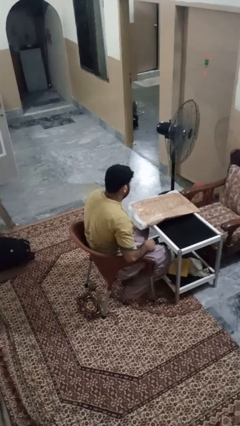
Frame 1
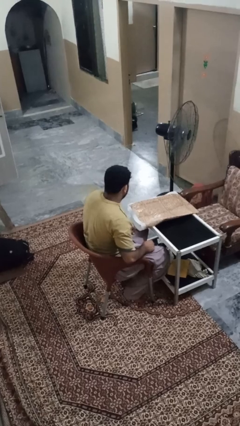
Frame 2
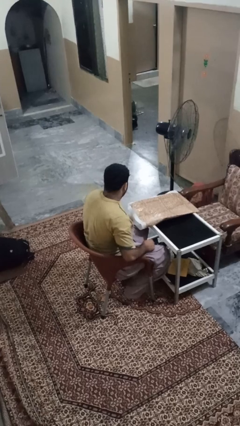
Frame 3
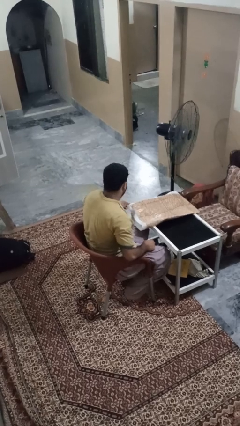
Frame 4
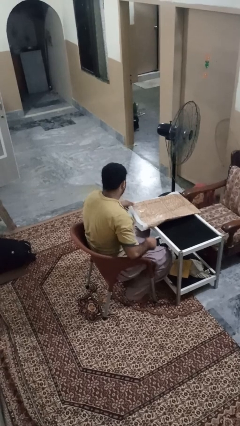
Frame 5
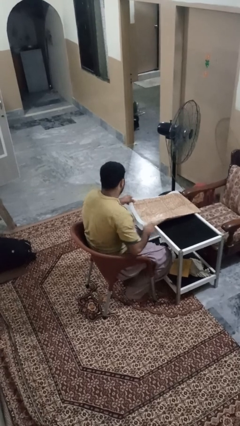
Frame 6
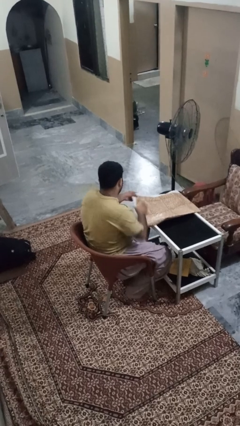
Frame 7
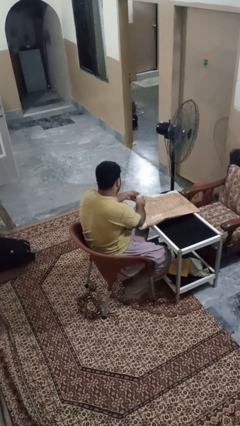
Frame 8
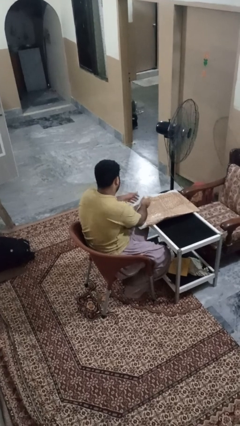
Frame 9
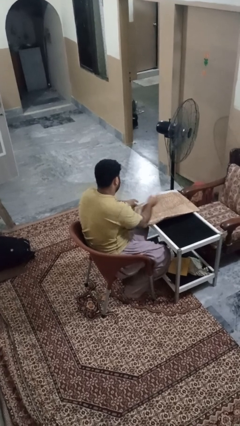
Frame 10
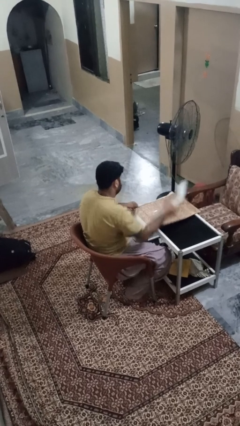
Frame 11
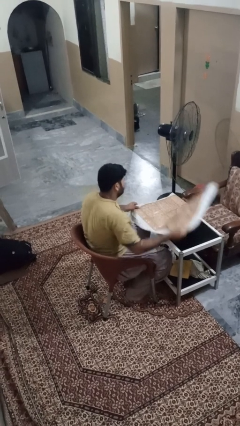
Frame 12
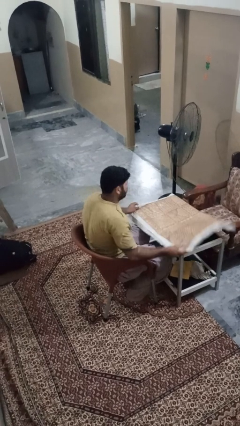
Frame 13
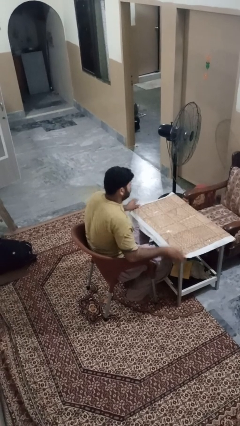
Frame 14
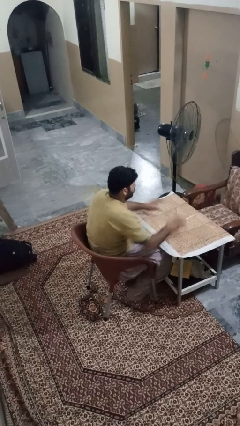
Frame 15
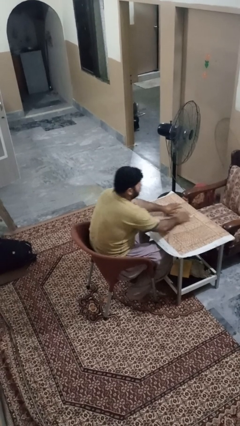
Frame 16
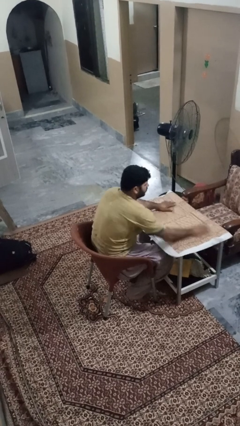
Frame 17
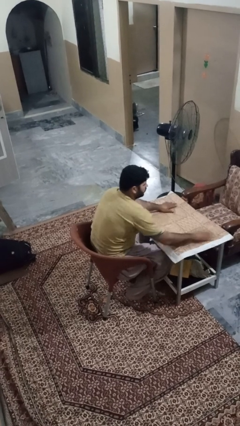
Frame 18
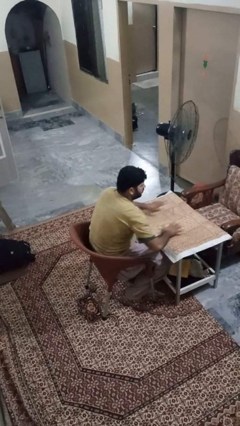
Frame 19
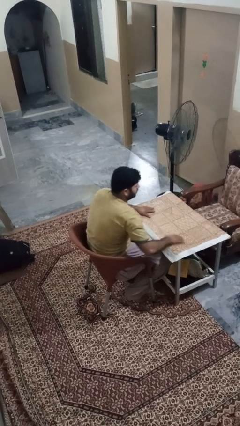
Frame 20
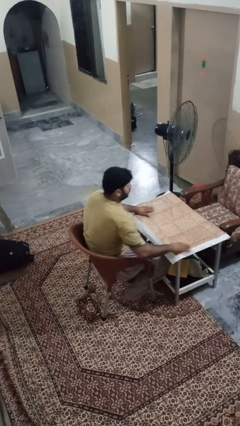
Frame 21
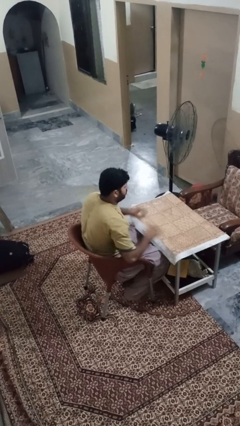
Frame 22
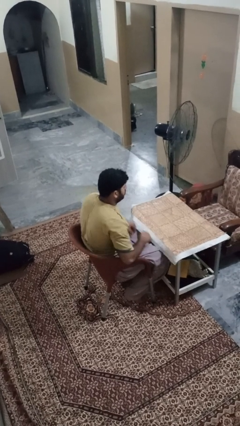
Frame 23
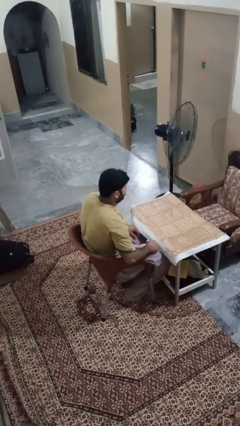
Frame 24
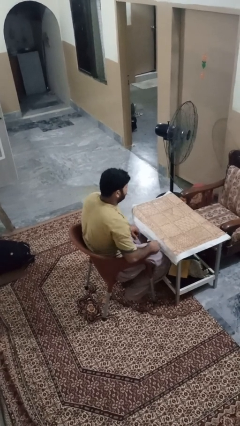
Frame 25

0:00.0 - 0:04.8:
person spreads tablecloth

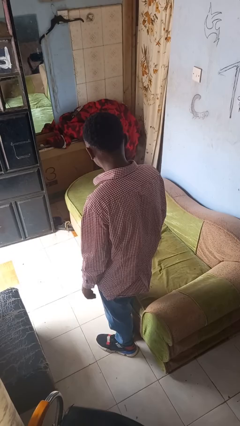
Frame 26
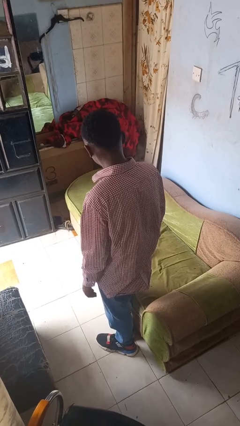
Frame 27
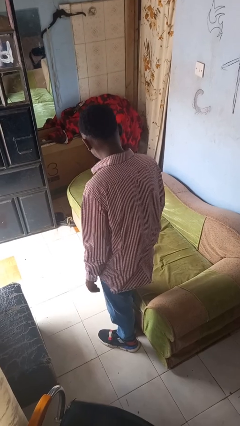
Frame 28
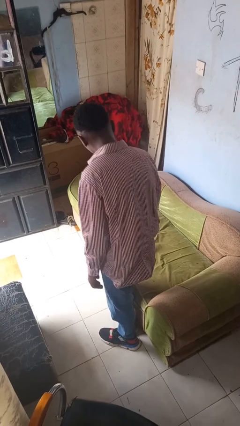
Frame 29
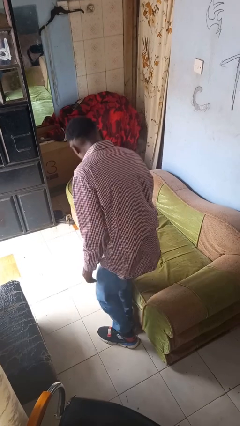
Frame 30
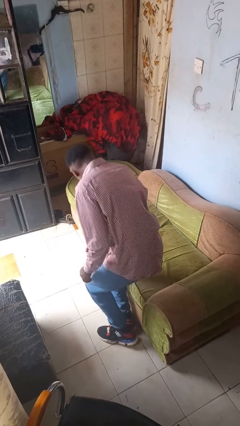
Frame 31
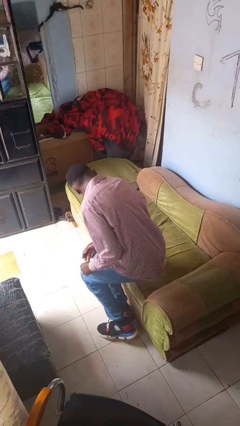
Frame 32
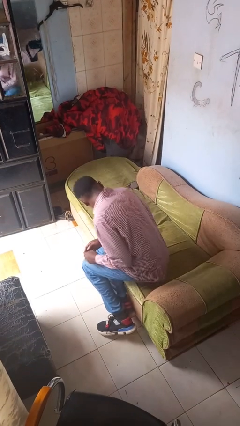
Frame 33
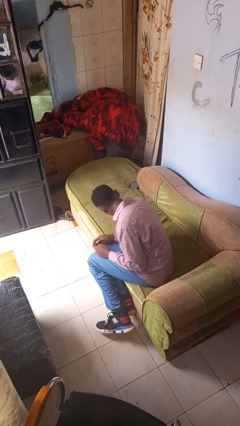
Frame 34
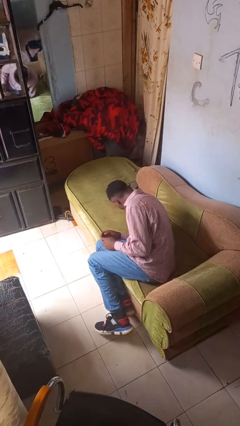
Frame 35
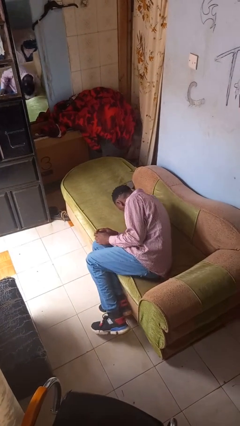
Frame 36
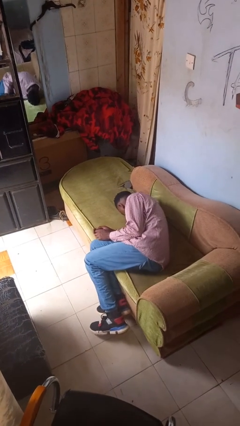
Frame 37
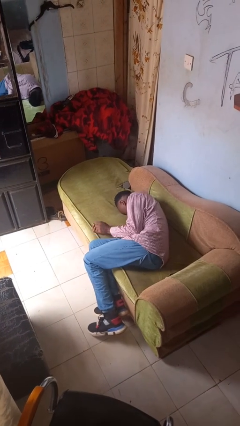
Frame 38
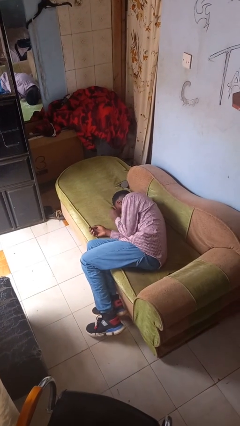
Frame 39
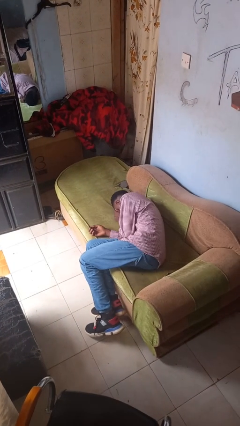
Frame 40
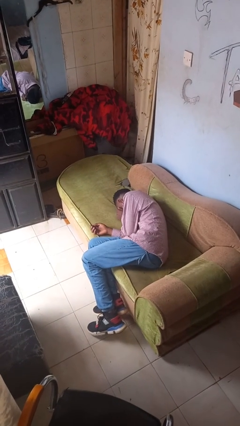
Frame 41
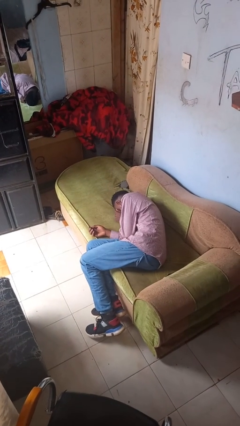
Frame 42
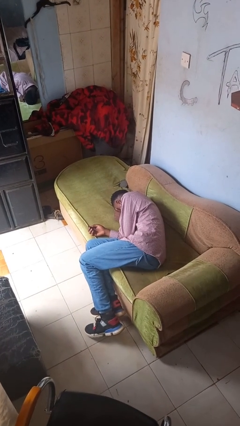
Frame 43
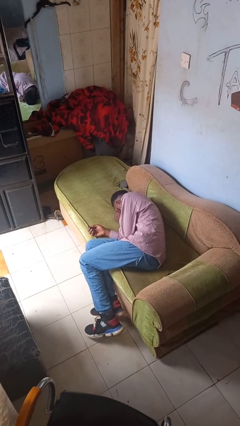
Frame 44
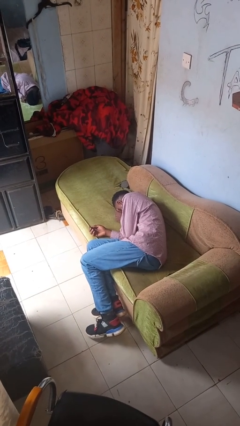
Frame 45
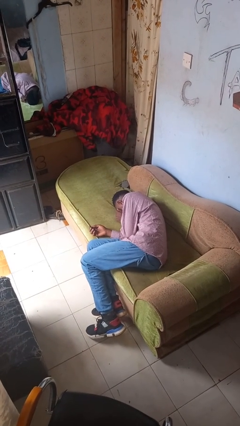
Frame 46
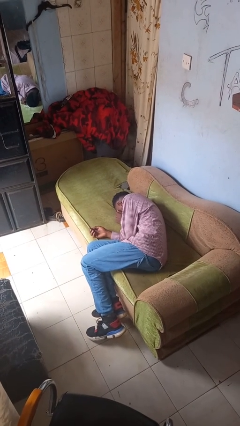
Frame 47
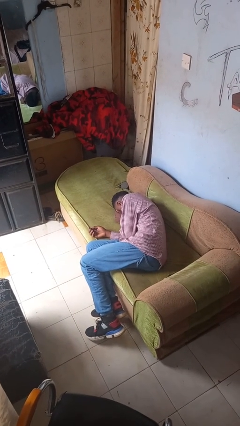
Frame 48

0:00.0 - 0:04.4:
person lies down on couch

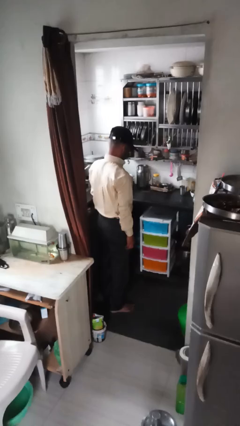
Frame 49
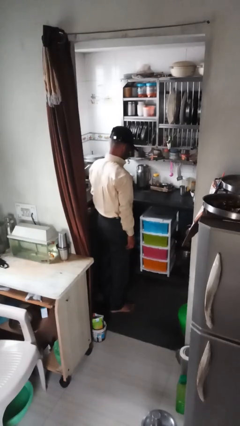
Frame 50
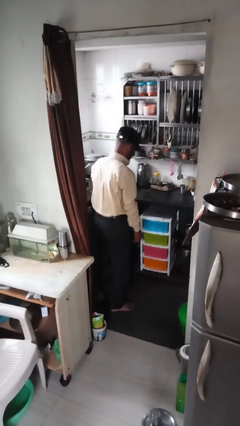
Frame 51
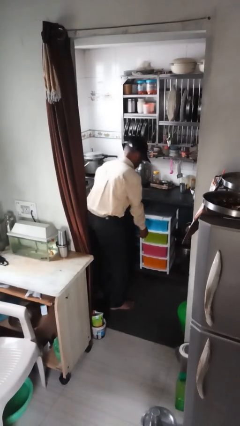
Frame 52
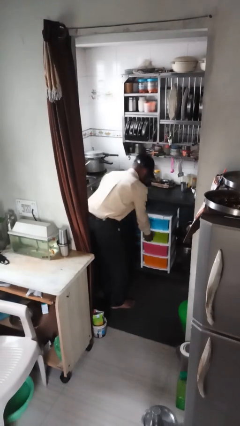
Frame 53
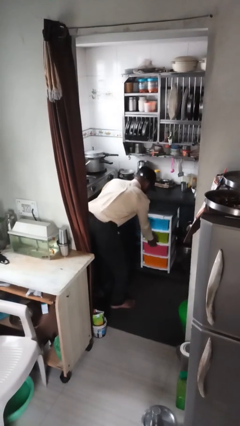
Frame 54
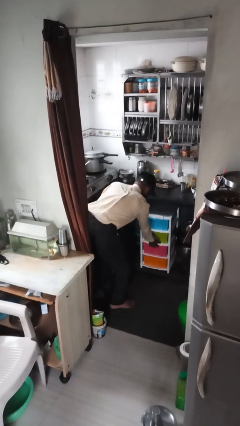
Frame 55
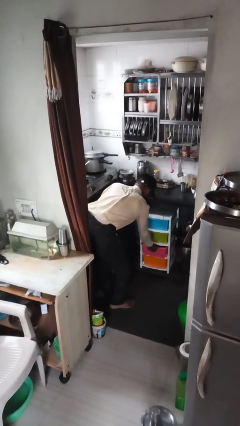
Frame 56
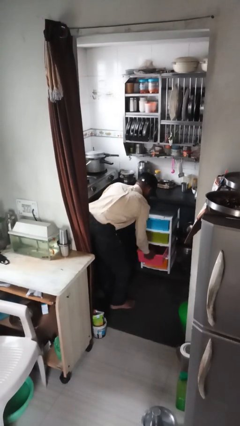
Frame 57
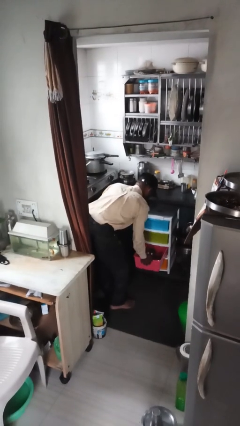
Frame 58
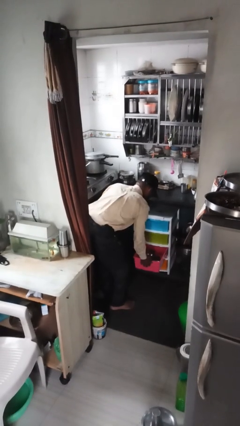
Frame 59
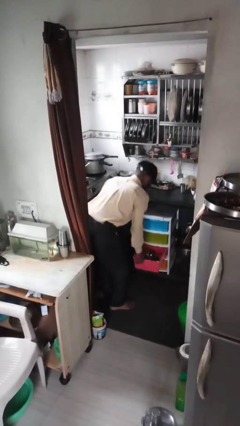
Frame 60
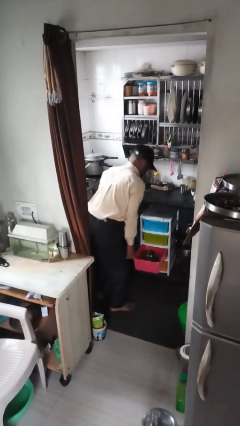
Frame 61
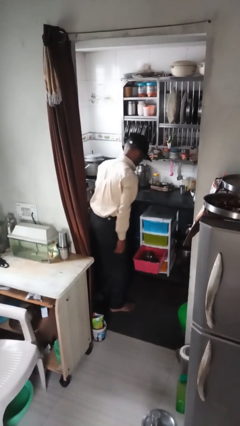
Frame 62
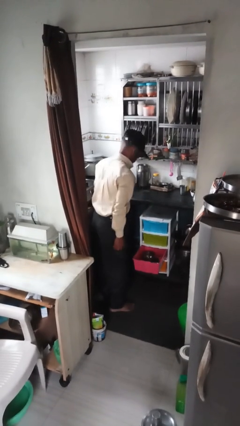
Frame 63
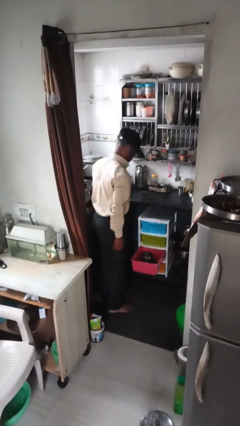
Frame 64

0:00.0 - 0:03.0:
person opens kitchen drawer

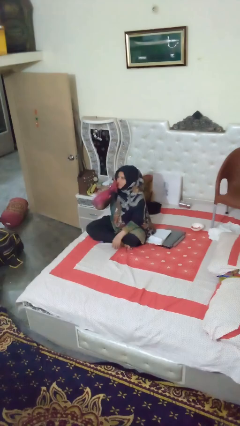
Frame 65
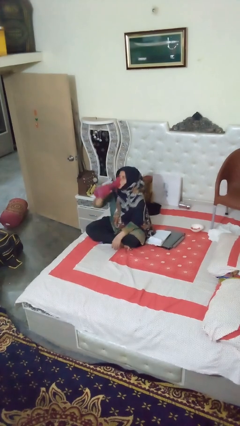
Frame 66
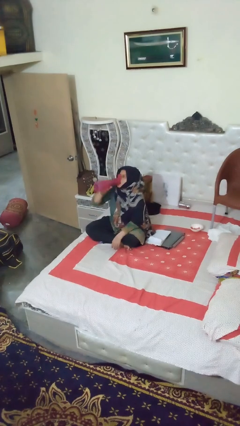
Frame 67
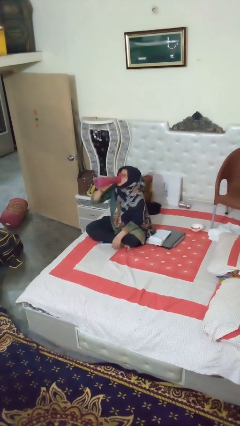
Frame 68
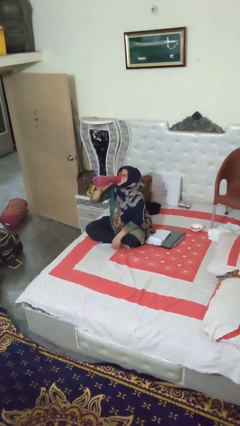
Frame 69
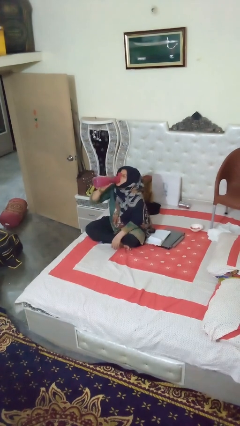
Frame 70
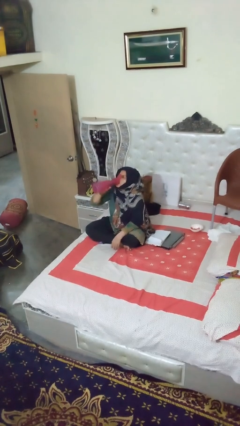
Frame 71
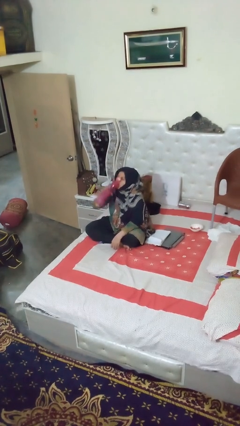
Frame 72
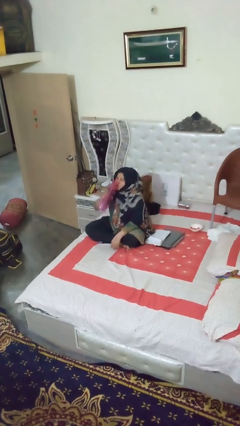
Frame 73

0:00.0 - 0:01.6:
person drinks from bottle

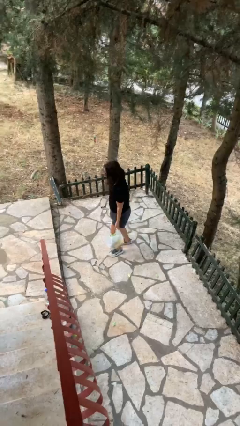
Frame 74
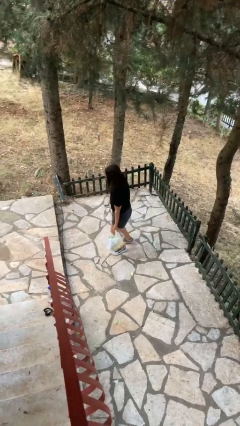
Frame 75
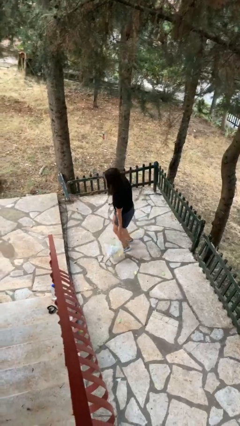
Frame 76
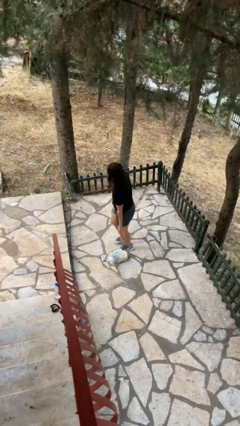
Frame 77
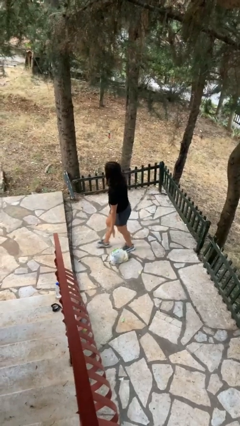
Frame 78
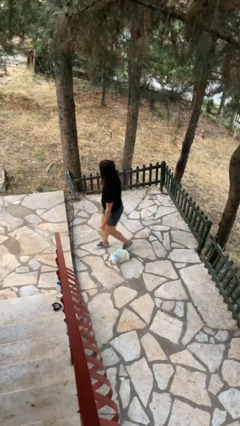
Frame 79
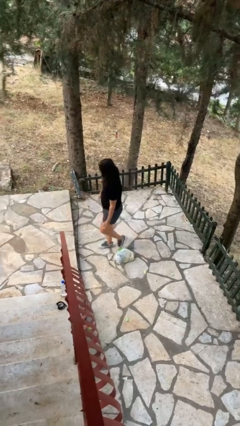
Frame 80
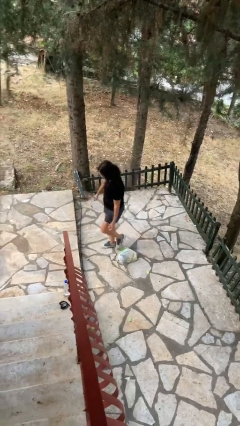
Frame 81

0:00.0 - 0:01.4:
person drops object

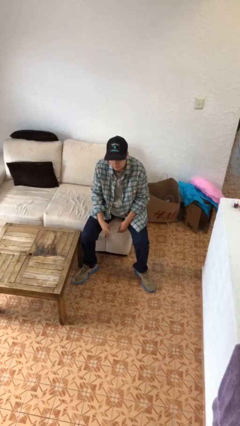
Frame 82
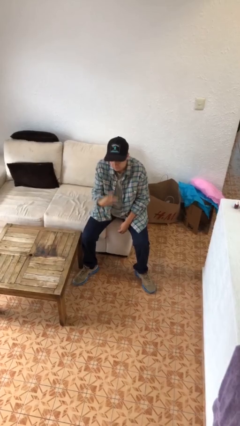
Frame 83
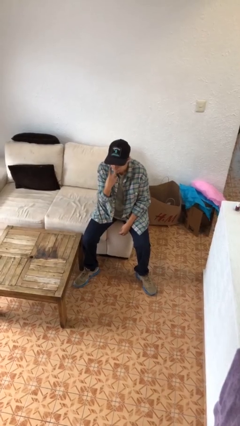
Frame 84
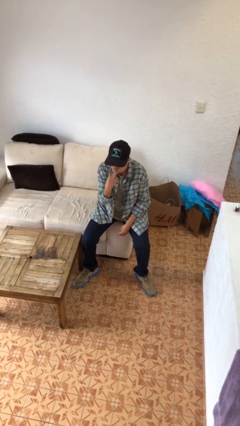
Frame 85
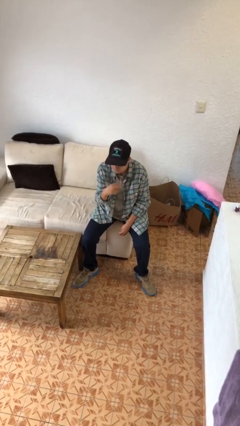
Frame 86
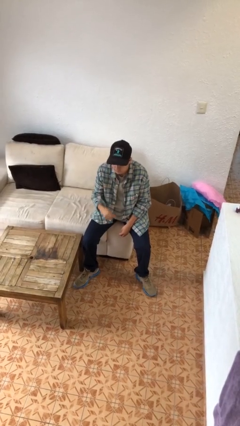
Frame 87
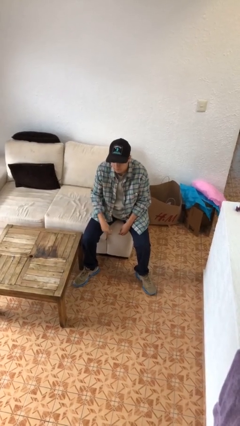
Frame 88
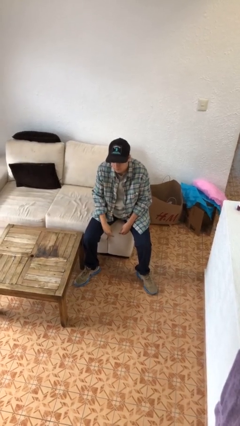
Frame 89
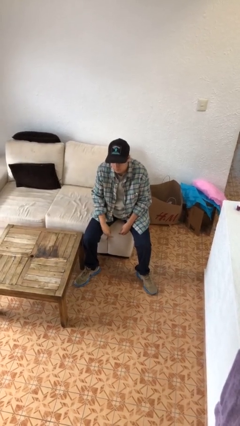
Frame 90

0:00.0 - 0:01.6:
person gestures watch closely

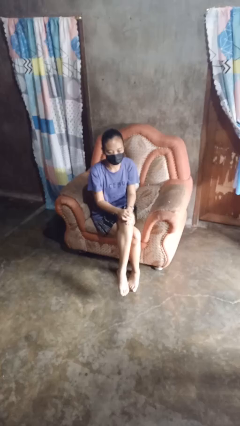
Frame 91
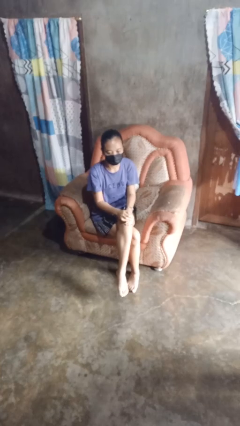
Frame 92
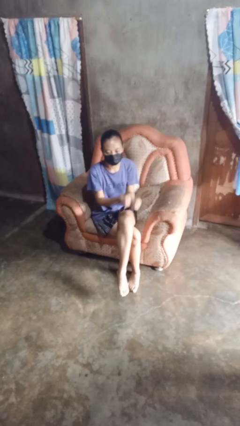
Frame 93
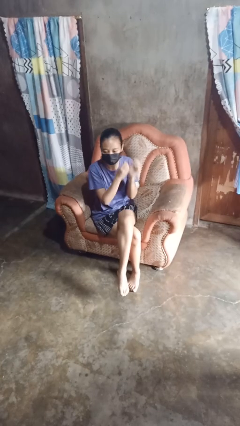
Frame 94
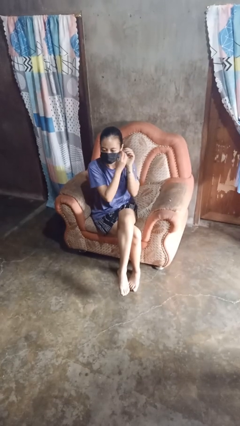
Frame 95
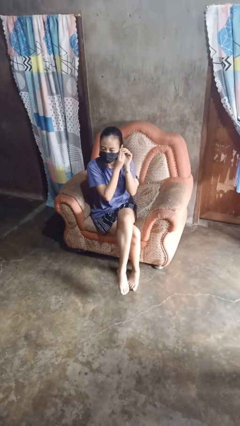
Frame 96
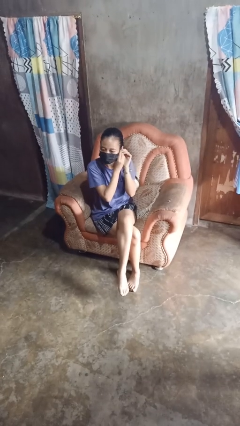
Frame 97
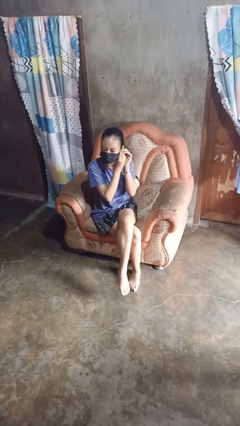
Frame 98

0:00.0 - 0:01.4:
person takes off earrings
